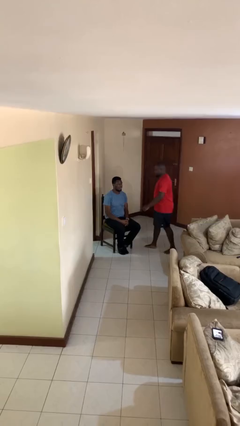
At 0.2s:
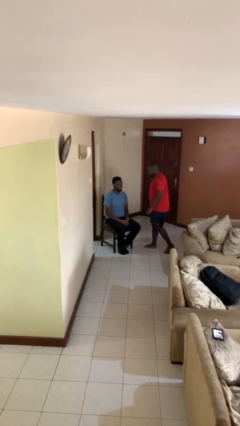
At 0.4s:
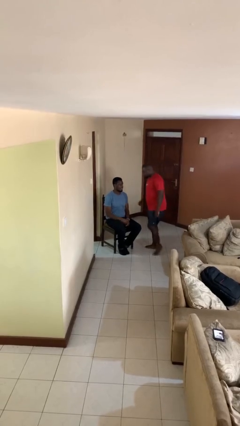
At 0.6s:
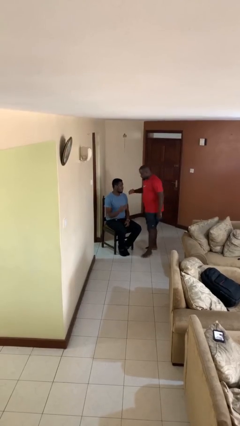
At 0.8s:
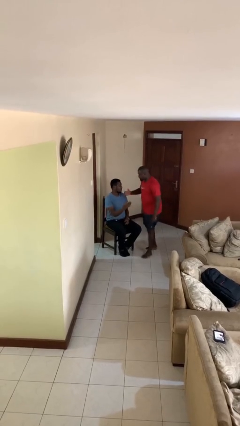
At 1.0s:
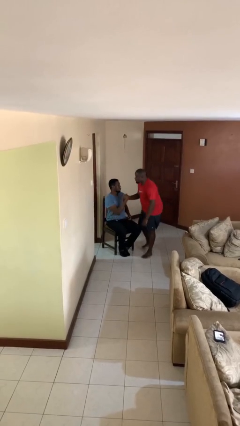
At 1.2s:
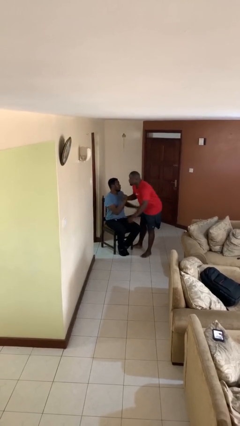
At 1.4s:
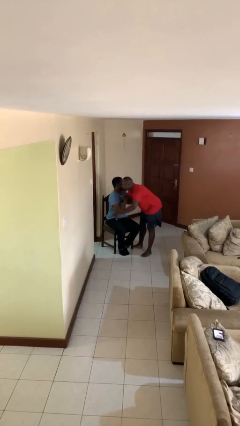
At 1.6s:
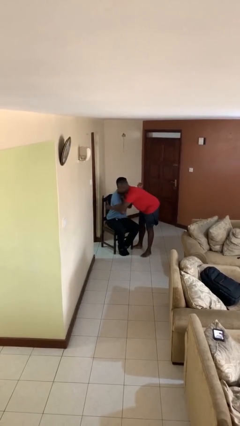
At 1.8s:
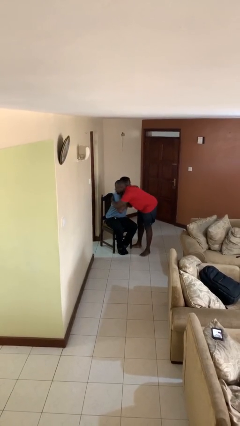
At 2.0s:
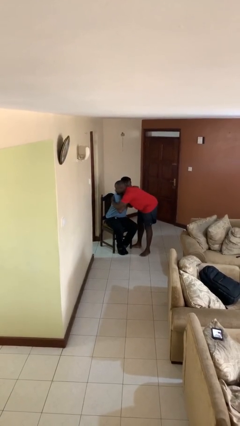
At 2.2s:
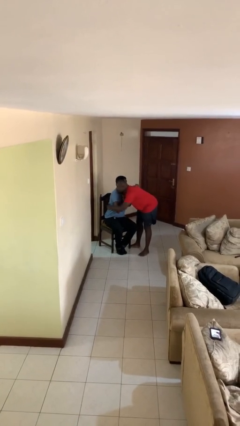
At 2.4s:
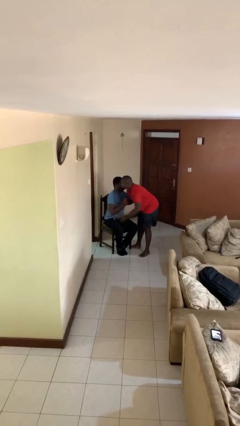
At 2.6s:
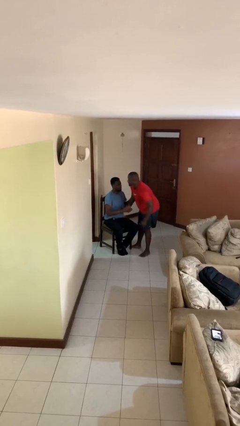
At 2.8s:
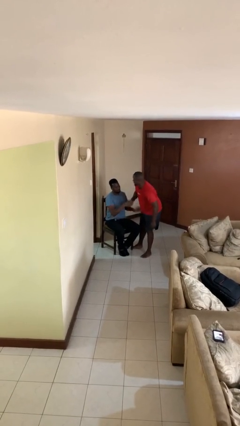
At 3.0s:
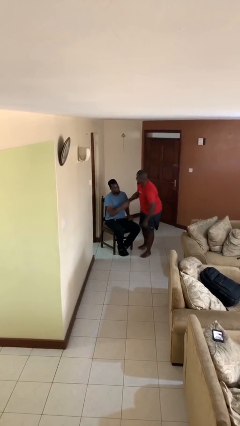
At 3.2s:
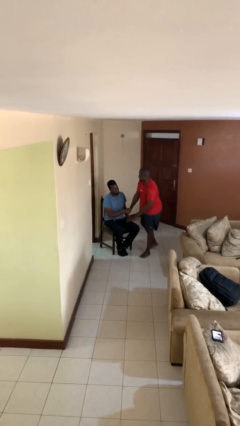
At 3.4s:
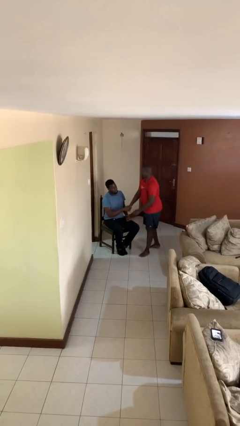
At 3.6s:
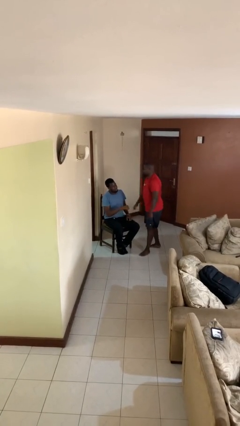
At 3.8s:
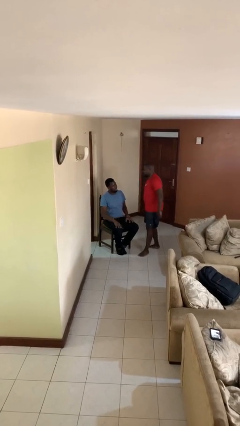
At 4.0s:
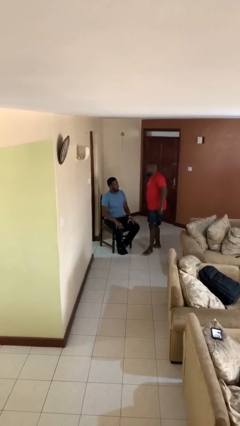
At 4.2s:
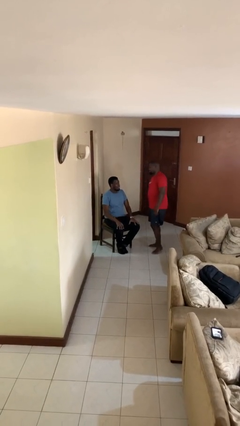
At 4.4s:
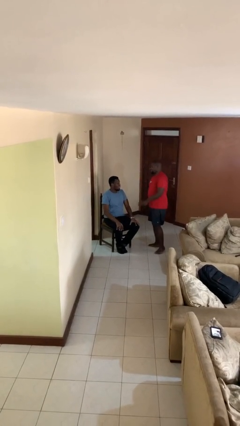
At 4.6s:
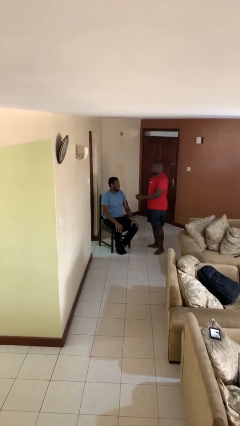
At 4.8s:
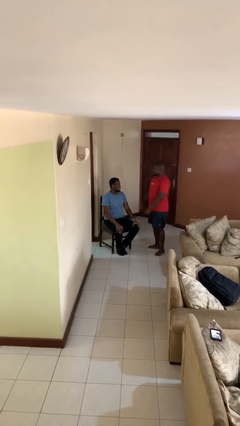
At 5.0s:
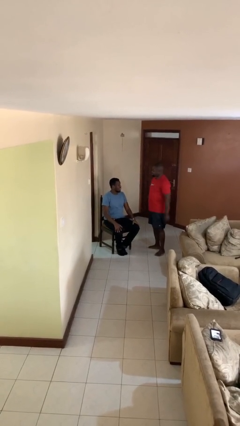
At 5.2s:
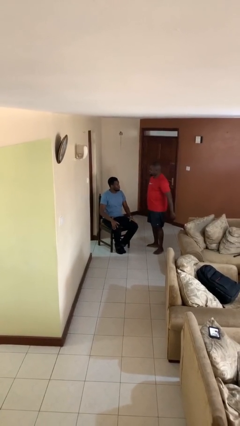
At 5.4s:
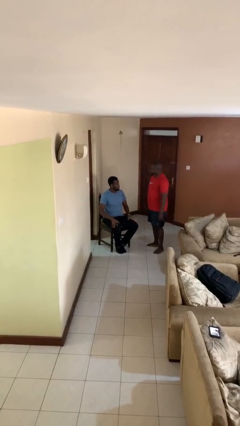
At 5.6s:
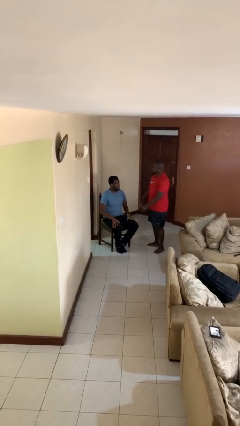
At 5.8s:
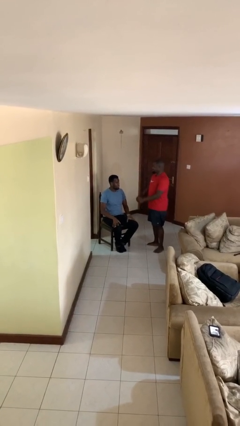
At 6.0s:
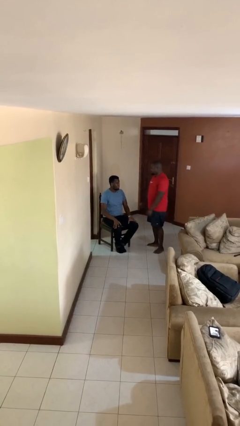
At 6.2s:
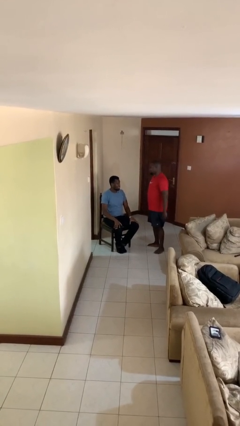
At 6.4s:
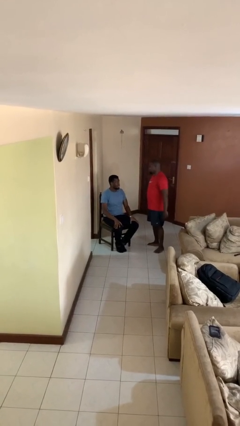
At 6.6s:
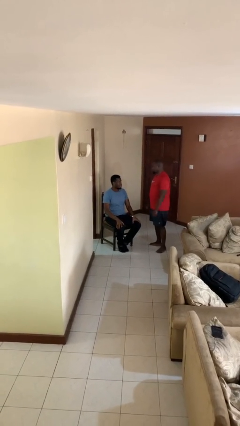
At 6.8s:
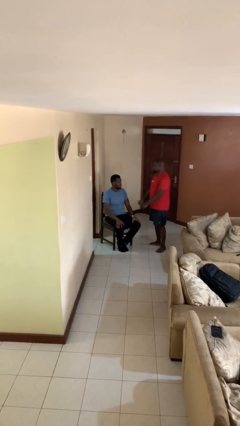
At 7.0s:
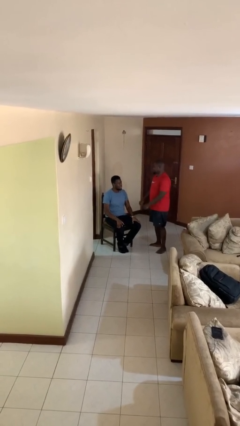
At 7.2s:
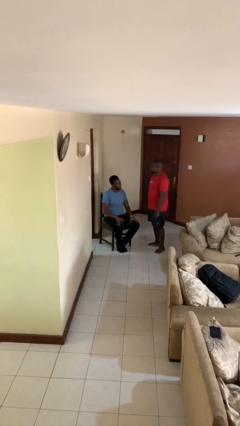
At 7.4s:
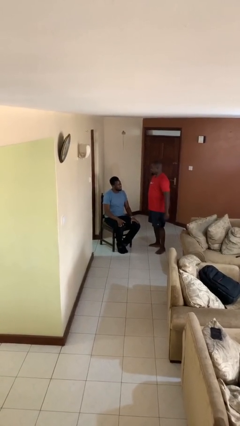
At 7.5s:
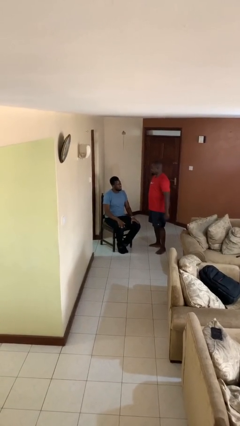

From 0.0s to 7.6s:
person embraces person

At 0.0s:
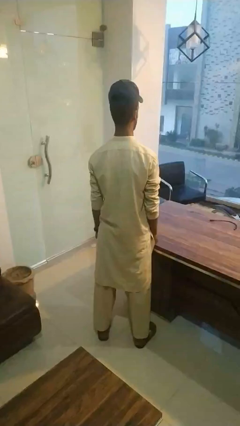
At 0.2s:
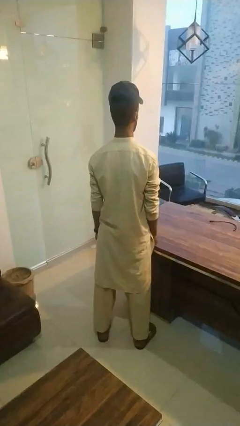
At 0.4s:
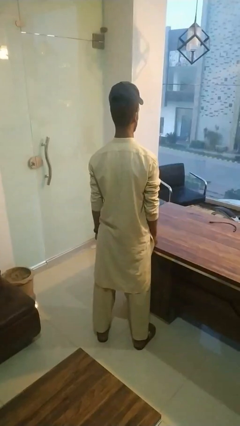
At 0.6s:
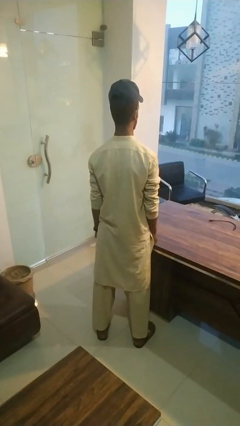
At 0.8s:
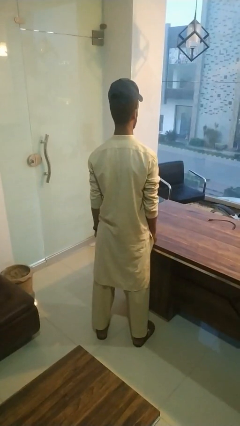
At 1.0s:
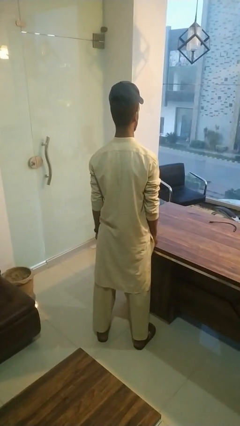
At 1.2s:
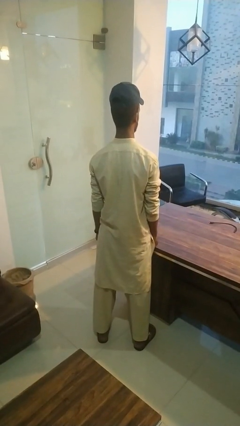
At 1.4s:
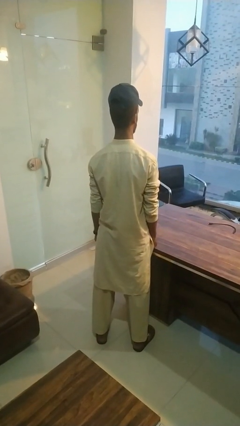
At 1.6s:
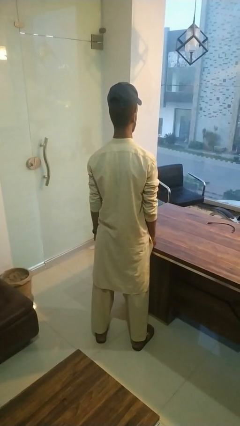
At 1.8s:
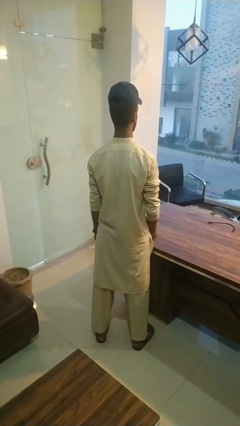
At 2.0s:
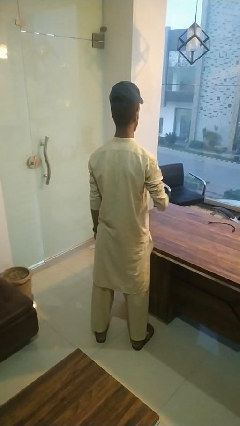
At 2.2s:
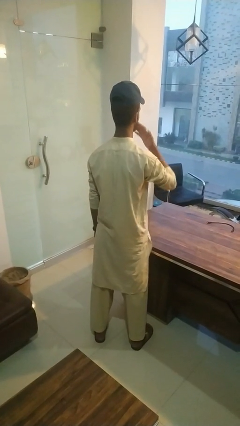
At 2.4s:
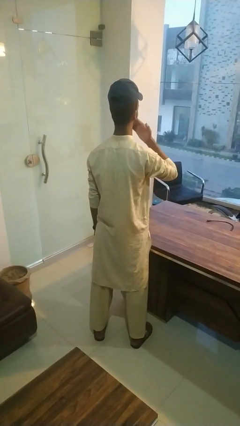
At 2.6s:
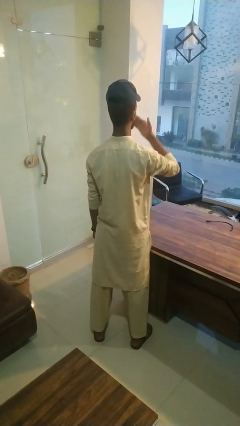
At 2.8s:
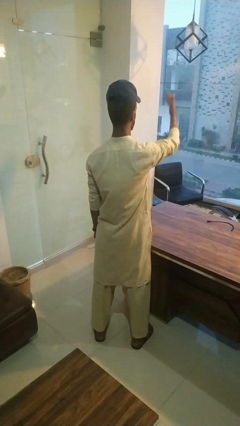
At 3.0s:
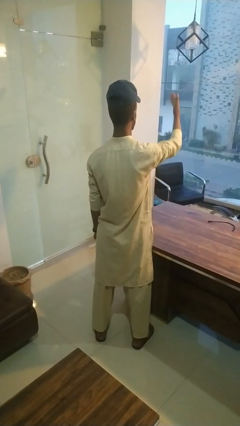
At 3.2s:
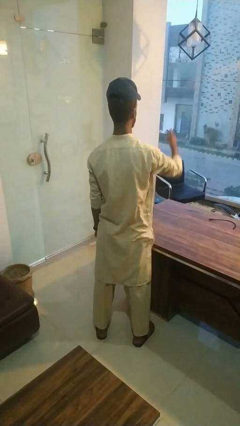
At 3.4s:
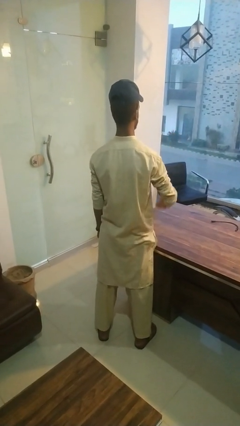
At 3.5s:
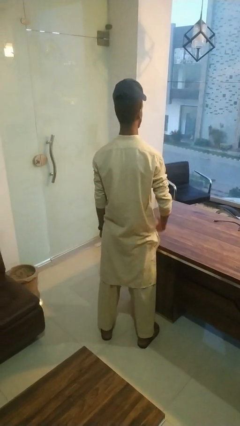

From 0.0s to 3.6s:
person gestures blow kiss

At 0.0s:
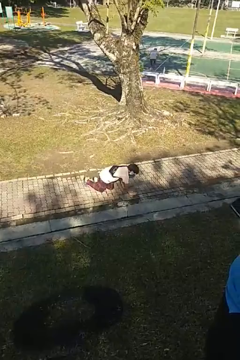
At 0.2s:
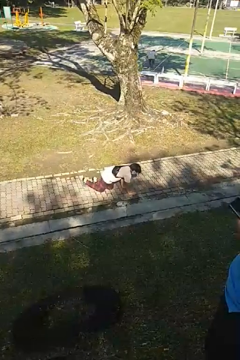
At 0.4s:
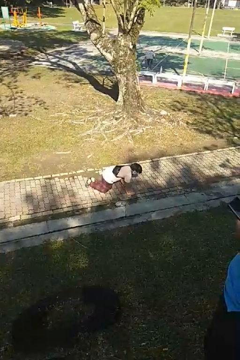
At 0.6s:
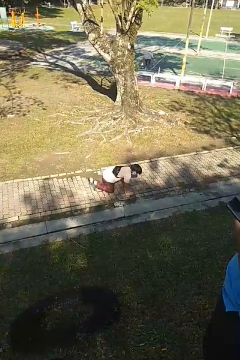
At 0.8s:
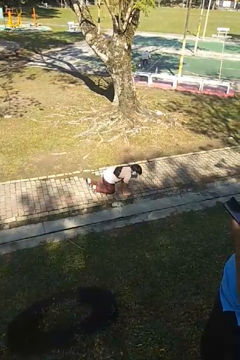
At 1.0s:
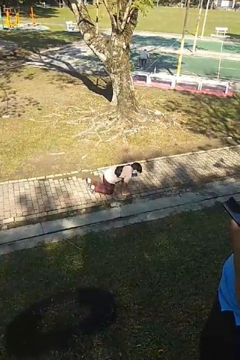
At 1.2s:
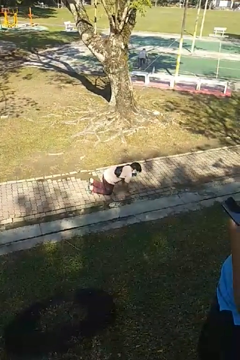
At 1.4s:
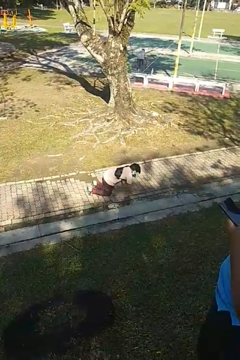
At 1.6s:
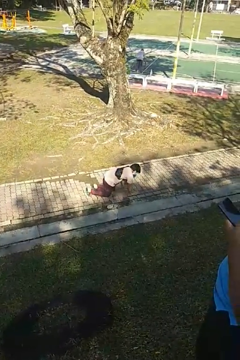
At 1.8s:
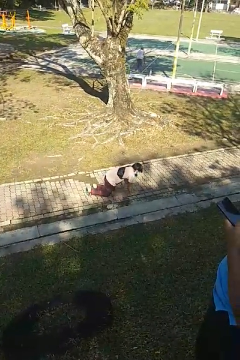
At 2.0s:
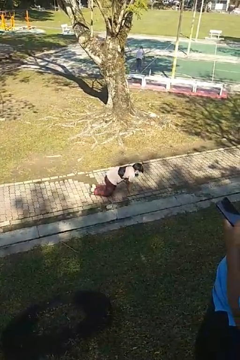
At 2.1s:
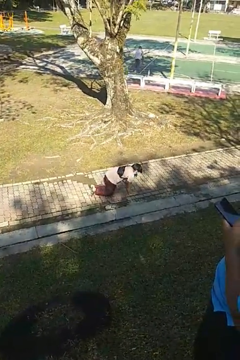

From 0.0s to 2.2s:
person crawls

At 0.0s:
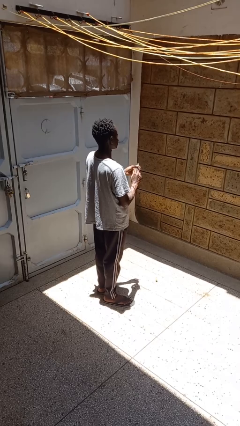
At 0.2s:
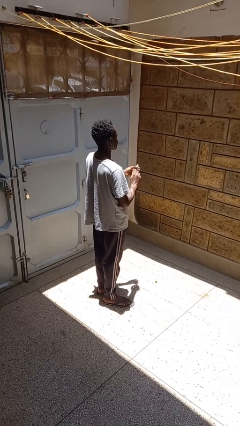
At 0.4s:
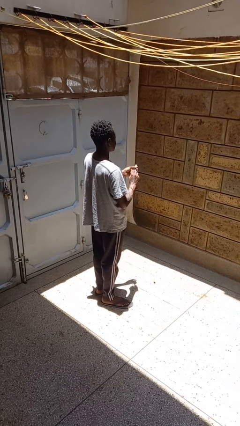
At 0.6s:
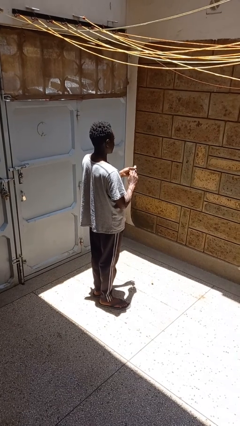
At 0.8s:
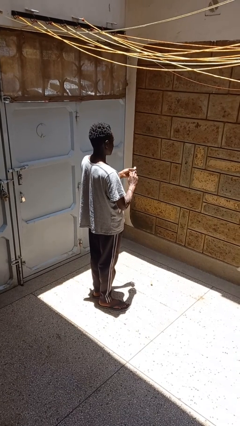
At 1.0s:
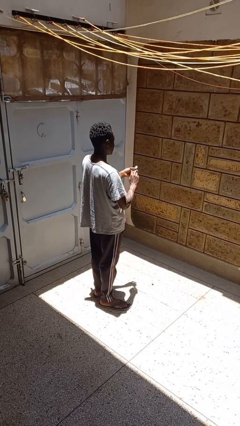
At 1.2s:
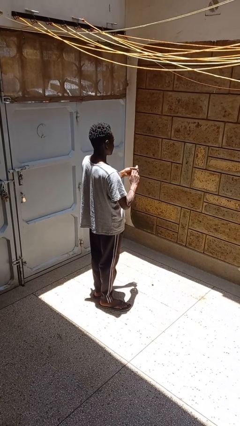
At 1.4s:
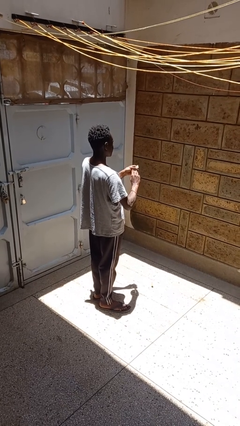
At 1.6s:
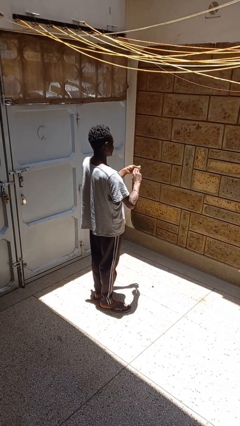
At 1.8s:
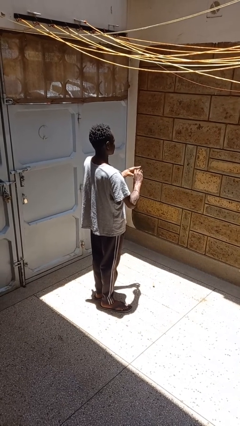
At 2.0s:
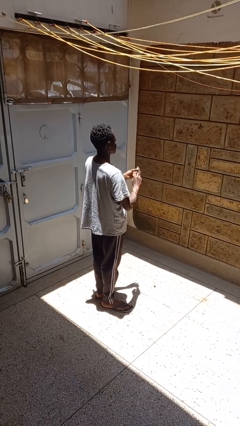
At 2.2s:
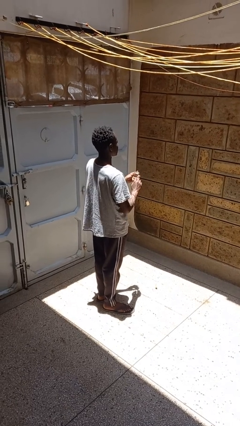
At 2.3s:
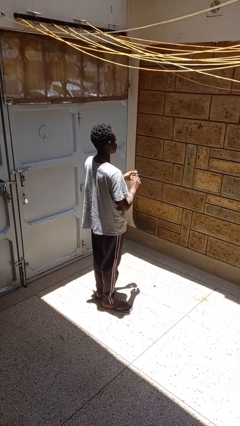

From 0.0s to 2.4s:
person clips fingernails

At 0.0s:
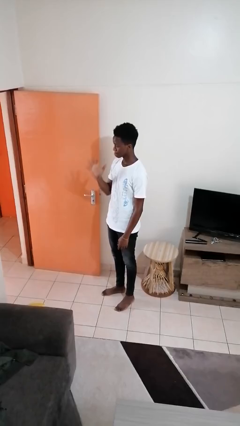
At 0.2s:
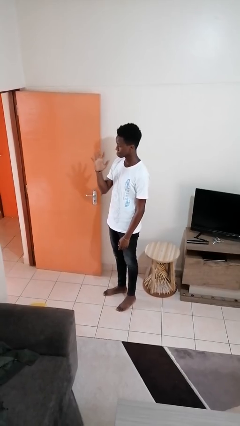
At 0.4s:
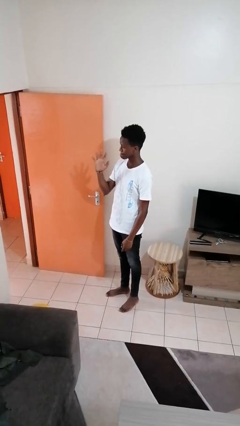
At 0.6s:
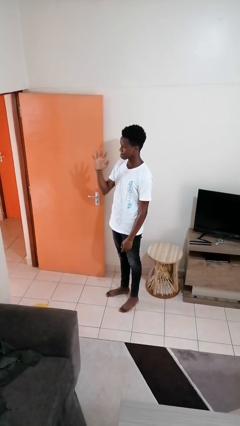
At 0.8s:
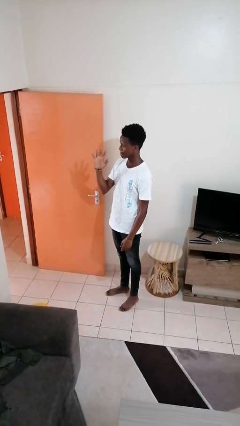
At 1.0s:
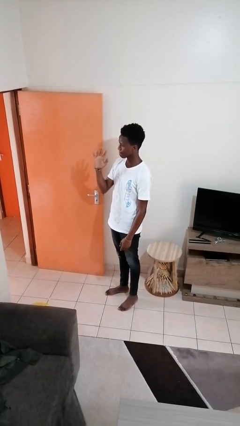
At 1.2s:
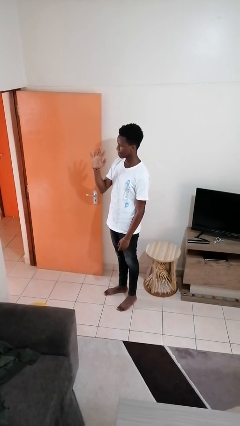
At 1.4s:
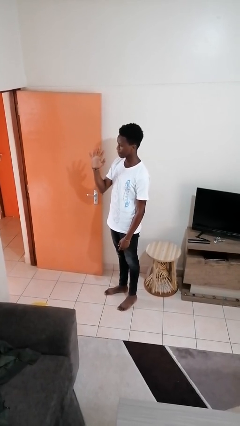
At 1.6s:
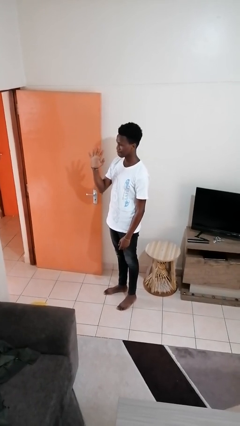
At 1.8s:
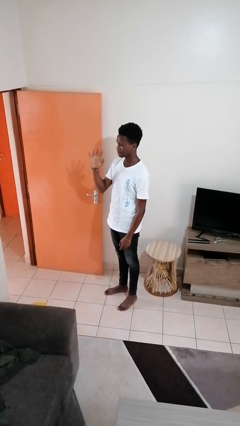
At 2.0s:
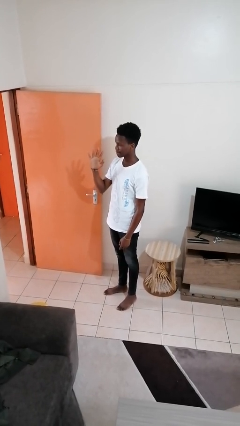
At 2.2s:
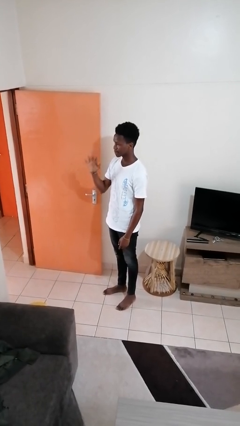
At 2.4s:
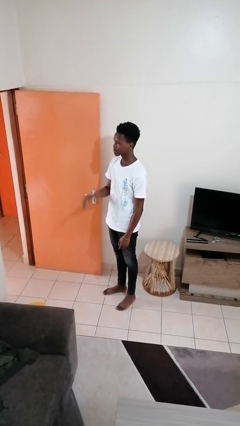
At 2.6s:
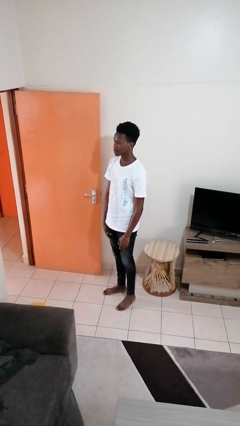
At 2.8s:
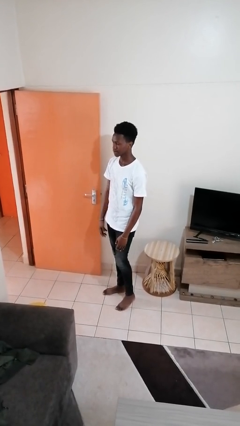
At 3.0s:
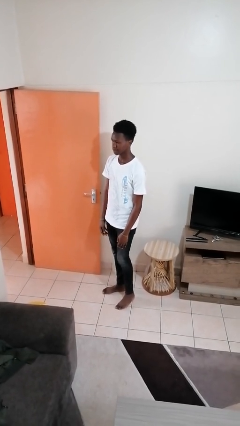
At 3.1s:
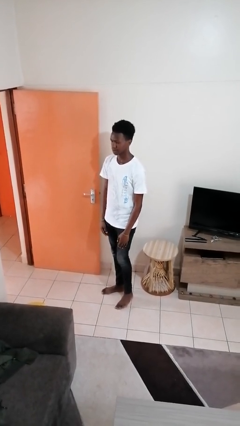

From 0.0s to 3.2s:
person gestures number five
